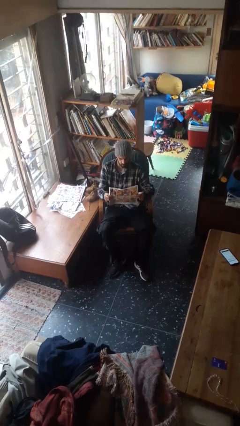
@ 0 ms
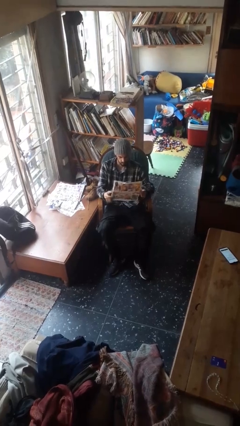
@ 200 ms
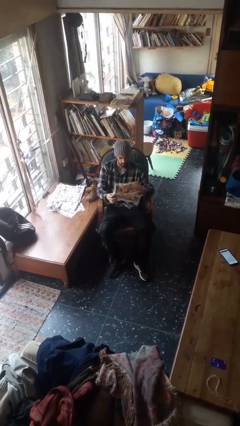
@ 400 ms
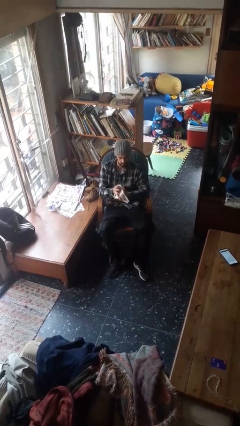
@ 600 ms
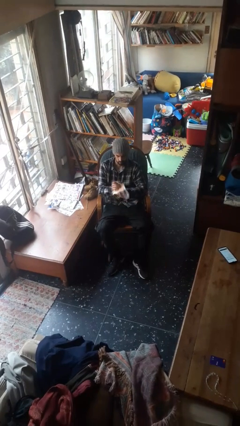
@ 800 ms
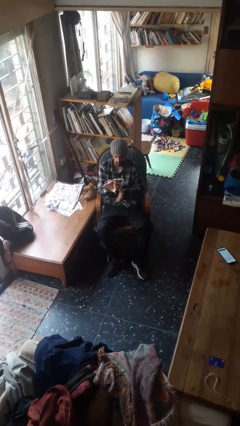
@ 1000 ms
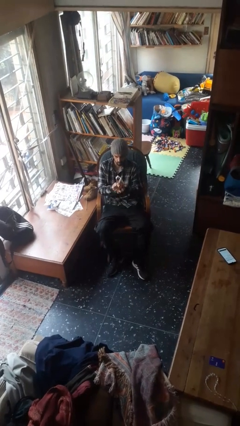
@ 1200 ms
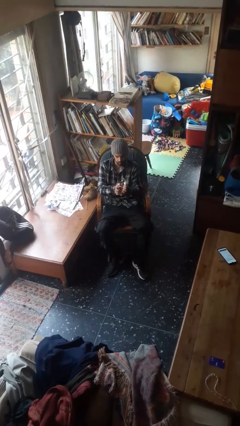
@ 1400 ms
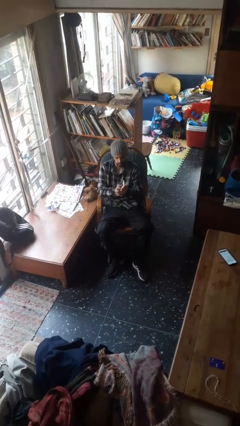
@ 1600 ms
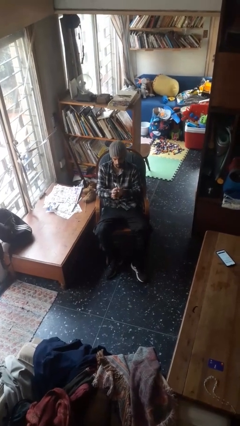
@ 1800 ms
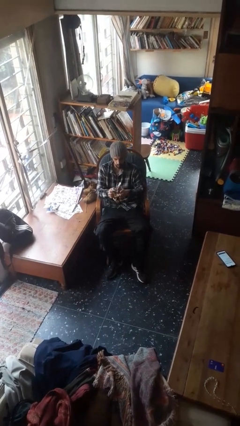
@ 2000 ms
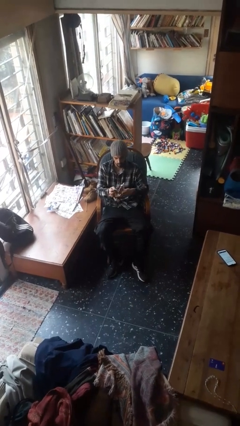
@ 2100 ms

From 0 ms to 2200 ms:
person crumples paper

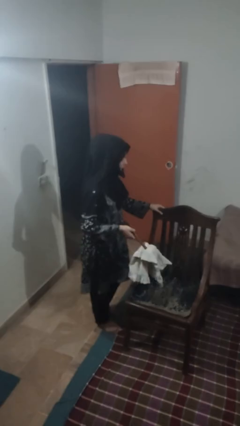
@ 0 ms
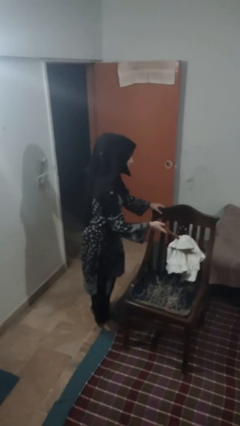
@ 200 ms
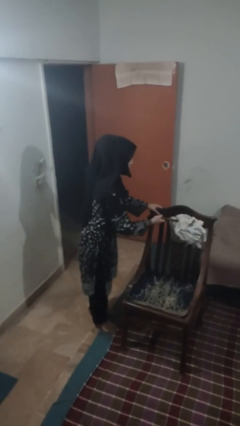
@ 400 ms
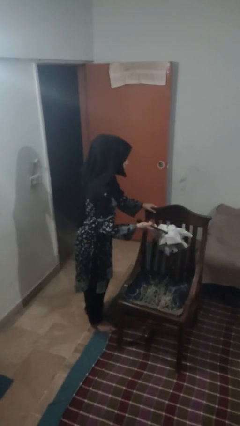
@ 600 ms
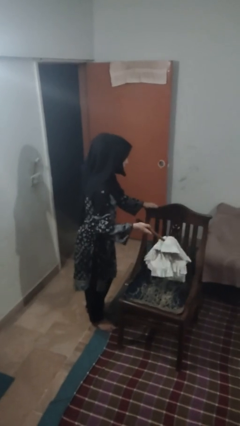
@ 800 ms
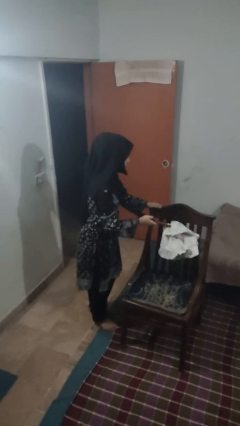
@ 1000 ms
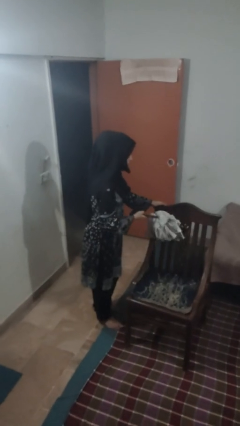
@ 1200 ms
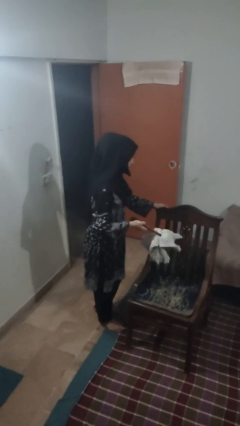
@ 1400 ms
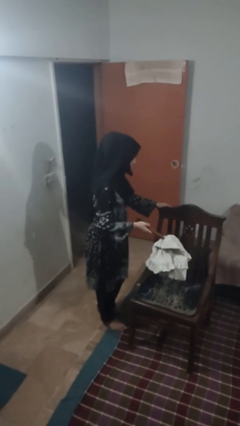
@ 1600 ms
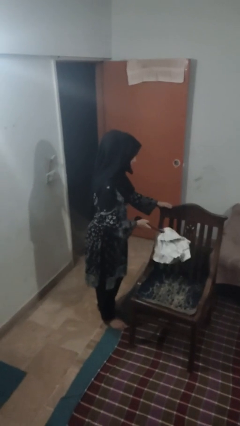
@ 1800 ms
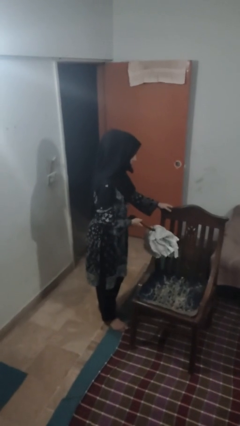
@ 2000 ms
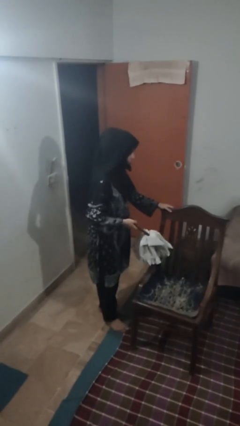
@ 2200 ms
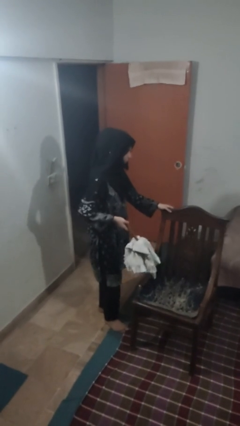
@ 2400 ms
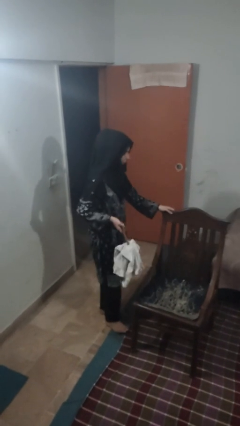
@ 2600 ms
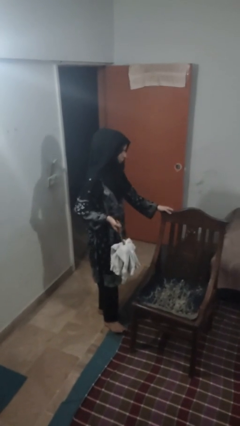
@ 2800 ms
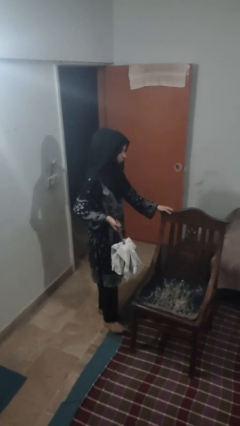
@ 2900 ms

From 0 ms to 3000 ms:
person dusts furniture

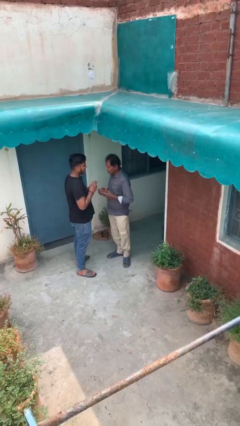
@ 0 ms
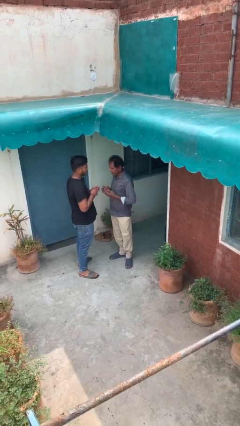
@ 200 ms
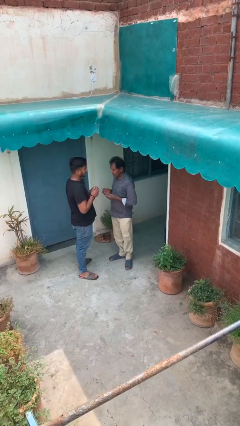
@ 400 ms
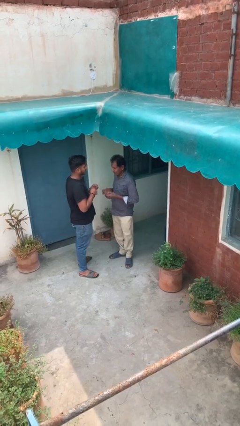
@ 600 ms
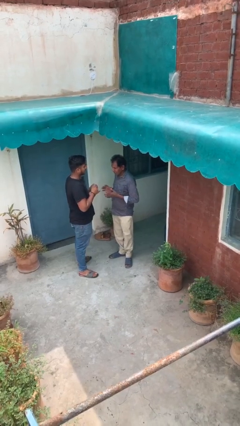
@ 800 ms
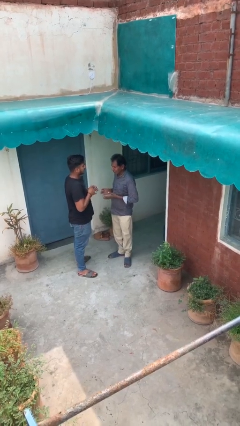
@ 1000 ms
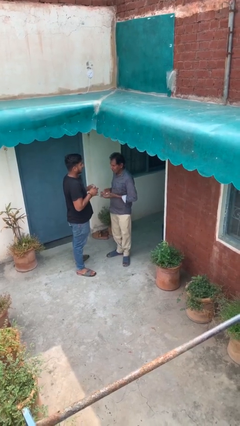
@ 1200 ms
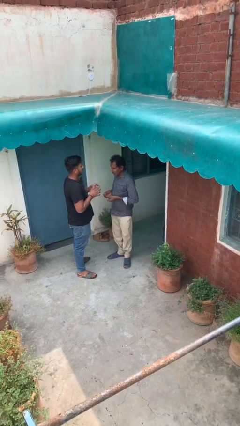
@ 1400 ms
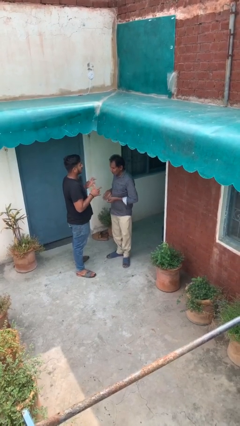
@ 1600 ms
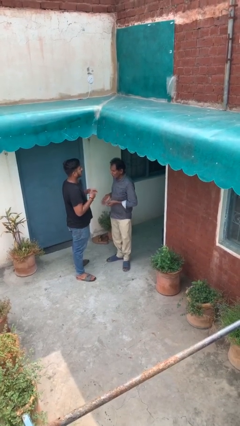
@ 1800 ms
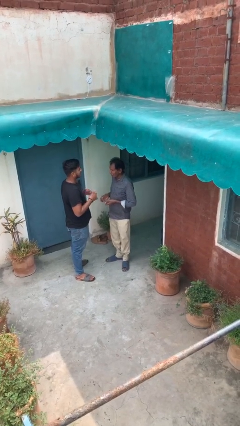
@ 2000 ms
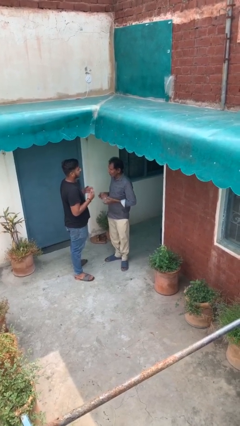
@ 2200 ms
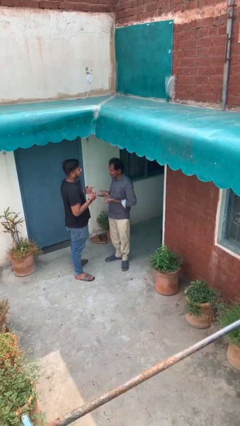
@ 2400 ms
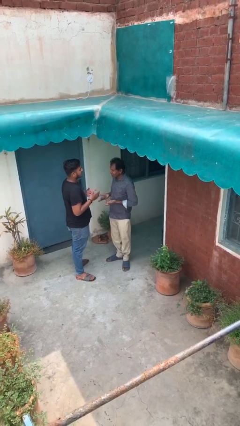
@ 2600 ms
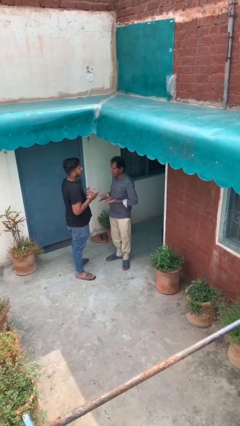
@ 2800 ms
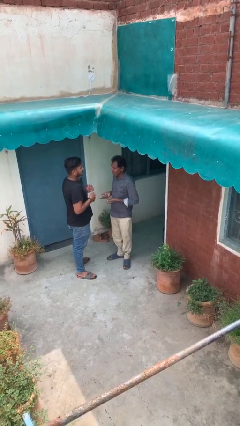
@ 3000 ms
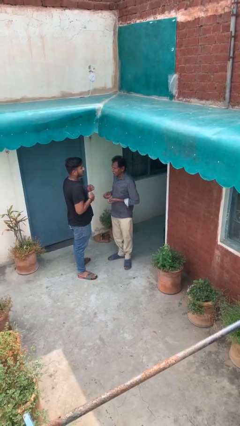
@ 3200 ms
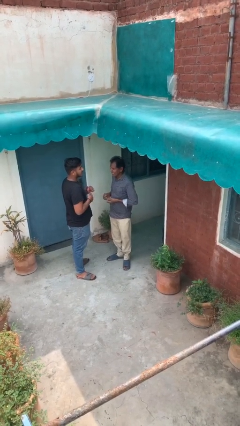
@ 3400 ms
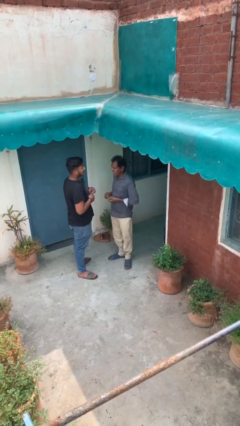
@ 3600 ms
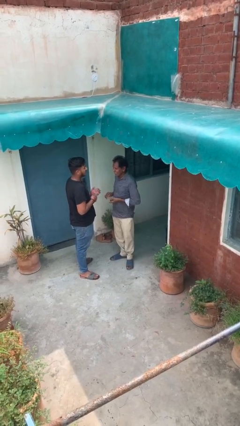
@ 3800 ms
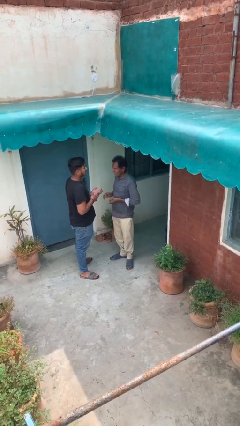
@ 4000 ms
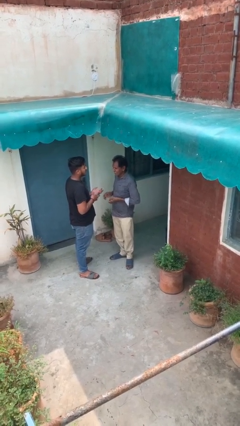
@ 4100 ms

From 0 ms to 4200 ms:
person talks to person

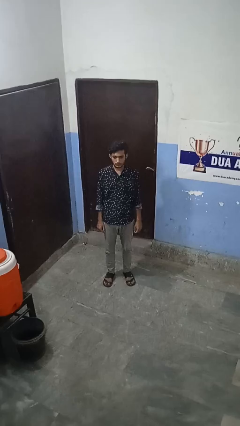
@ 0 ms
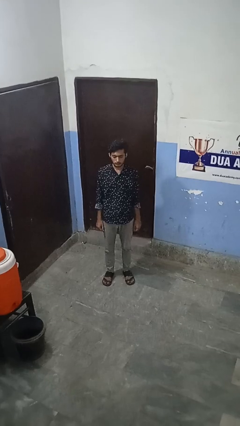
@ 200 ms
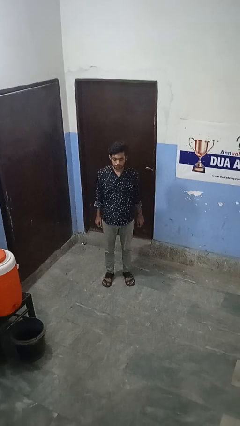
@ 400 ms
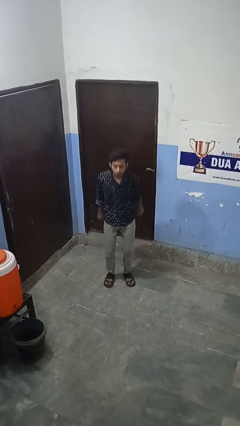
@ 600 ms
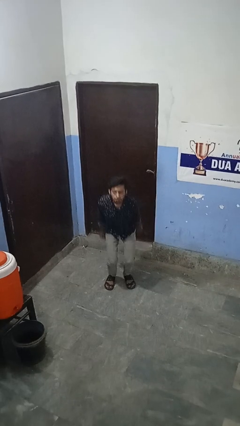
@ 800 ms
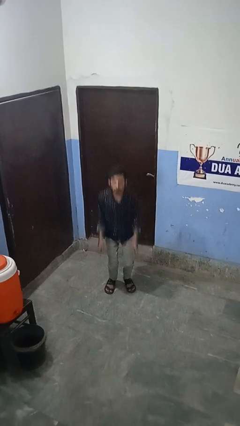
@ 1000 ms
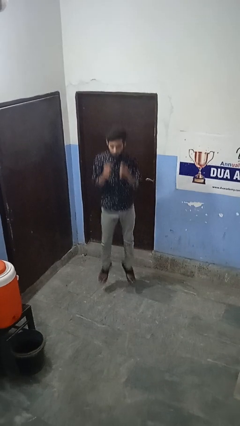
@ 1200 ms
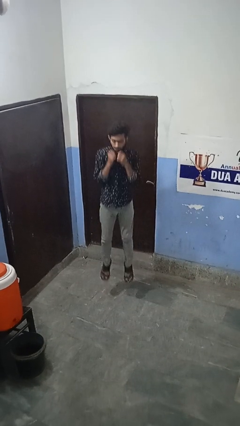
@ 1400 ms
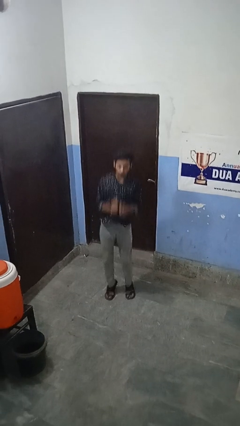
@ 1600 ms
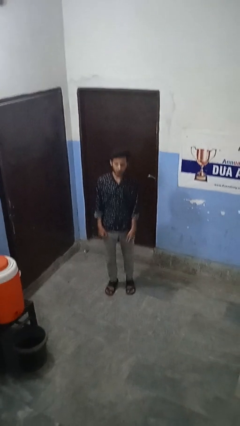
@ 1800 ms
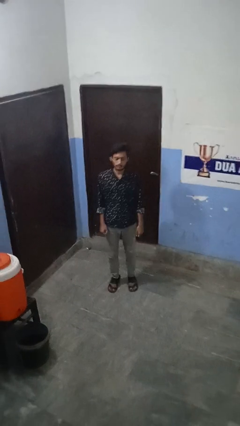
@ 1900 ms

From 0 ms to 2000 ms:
person jumps

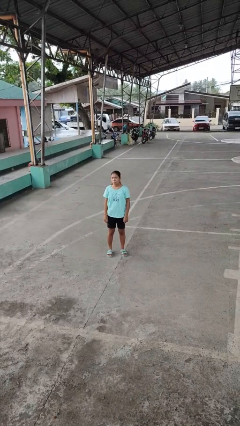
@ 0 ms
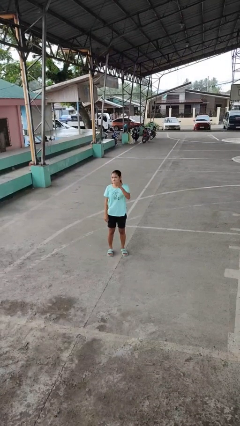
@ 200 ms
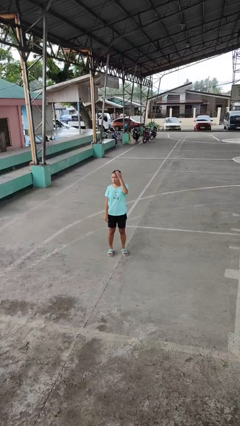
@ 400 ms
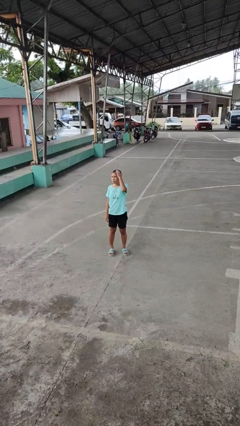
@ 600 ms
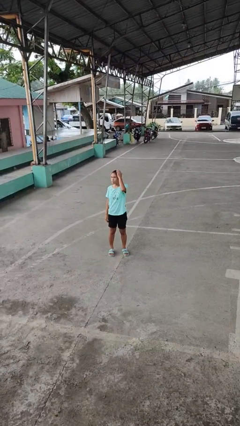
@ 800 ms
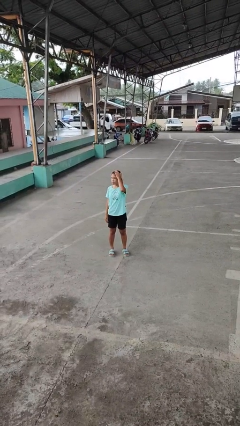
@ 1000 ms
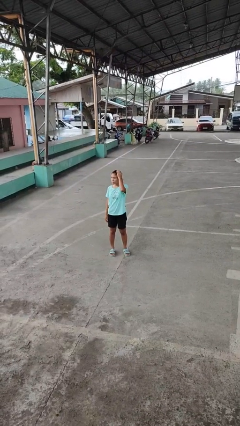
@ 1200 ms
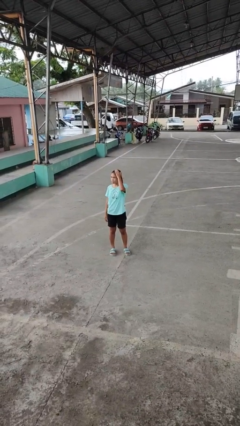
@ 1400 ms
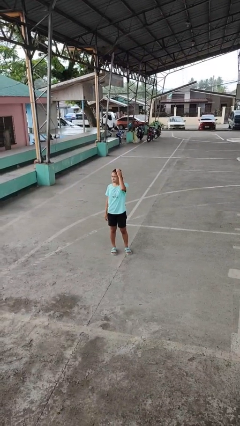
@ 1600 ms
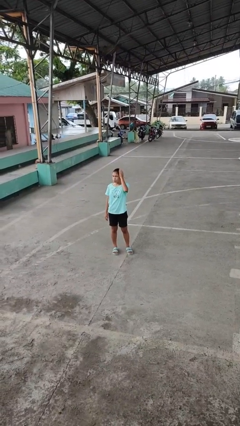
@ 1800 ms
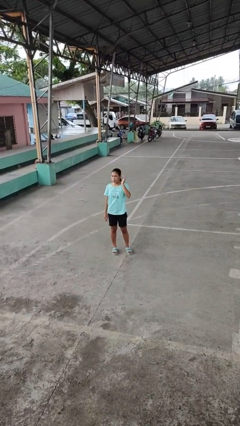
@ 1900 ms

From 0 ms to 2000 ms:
person pats head

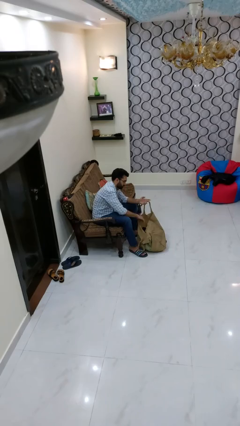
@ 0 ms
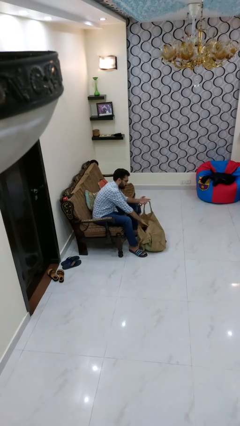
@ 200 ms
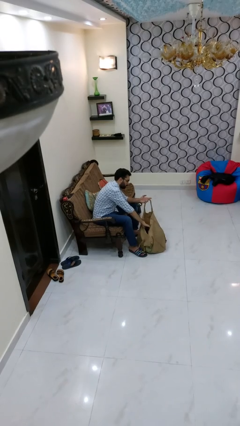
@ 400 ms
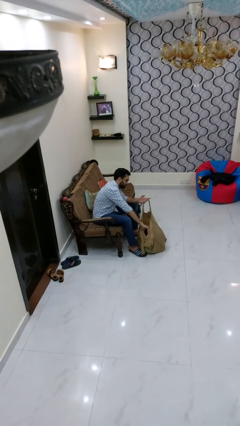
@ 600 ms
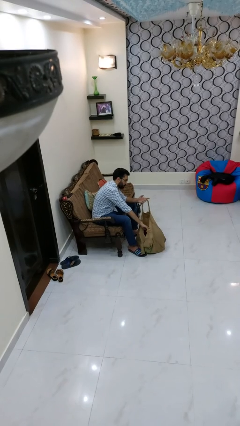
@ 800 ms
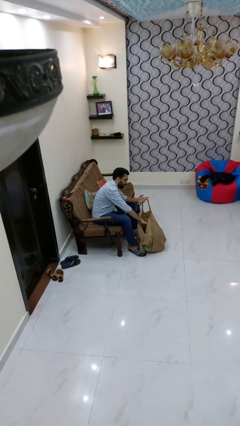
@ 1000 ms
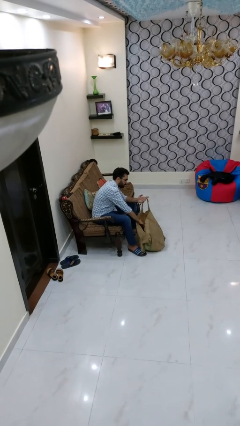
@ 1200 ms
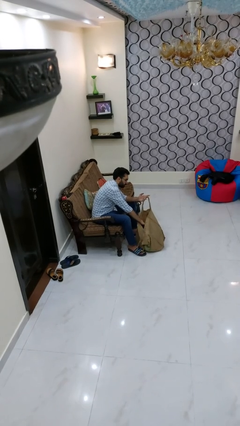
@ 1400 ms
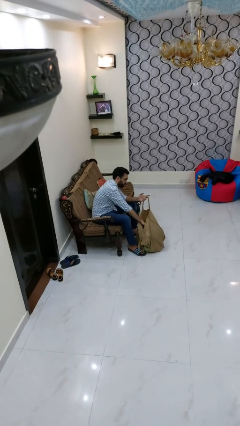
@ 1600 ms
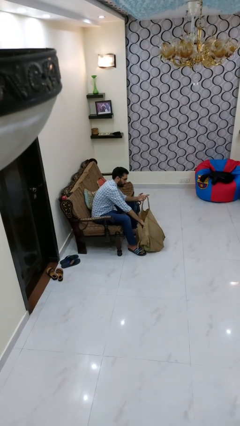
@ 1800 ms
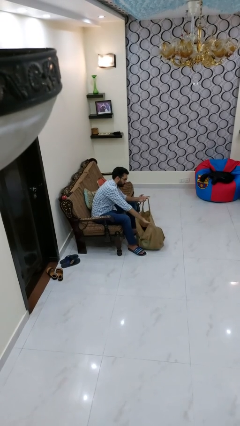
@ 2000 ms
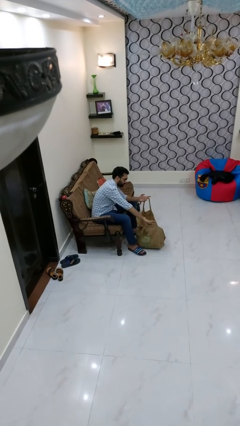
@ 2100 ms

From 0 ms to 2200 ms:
person searches in bag

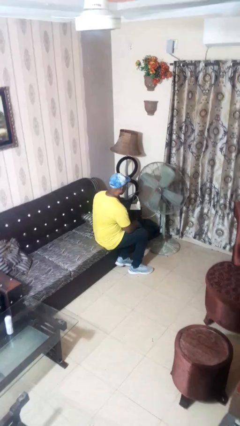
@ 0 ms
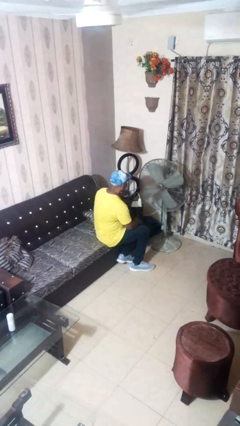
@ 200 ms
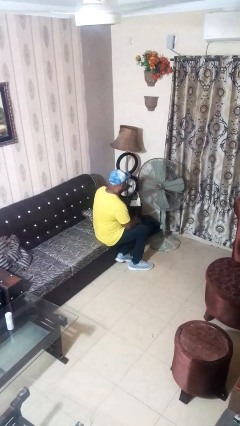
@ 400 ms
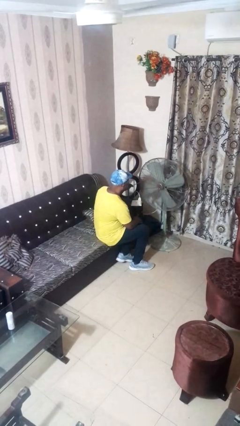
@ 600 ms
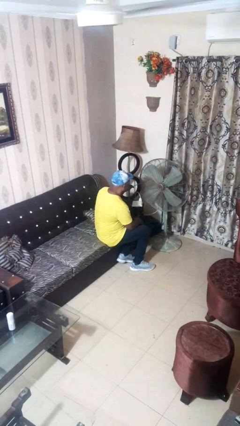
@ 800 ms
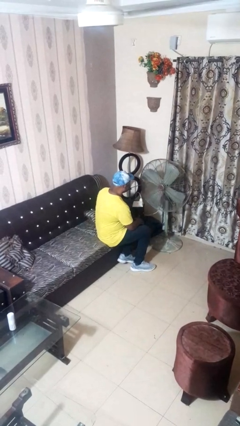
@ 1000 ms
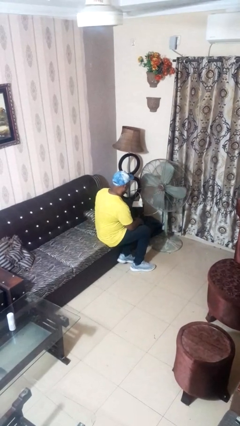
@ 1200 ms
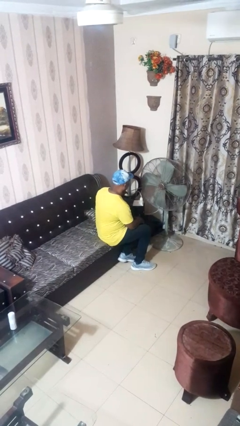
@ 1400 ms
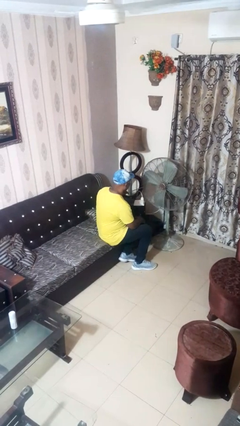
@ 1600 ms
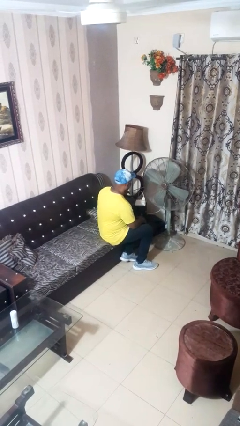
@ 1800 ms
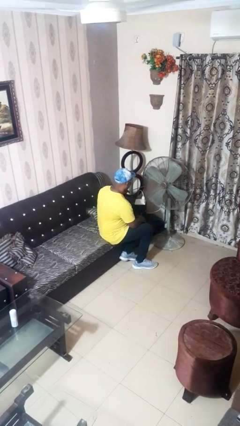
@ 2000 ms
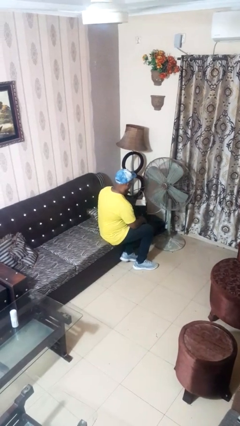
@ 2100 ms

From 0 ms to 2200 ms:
person turns off fan
